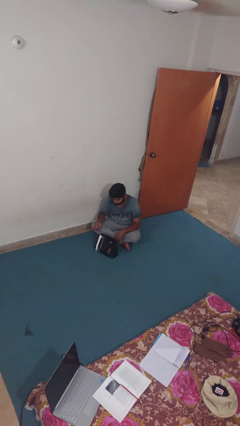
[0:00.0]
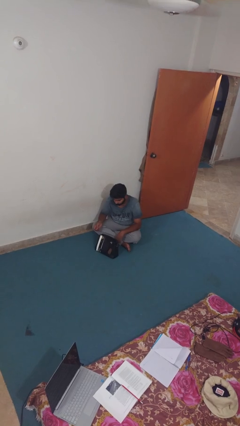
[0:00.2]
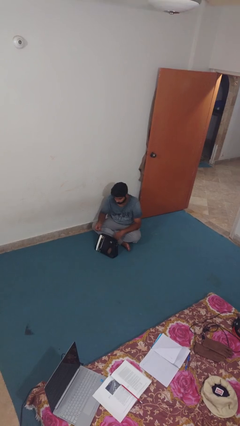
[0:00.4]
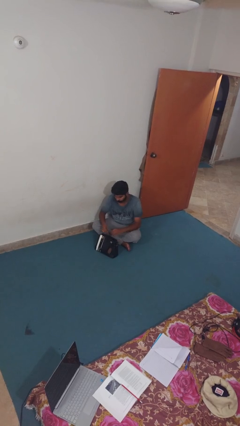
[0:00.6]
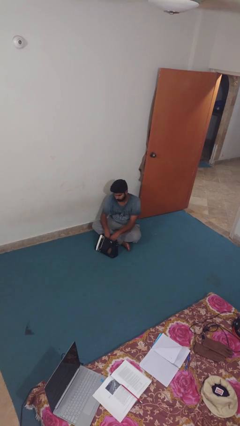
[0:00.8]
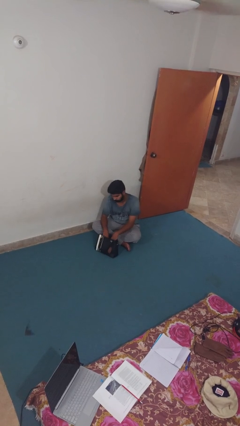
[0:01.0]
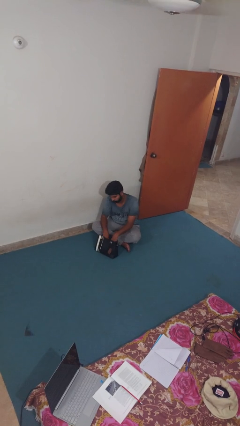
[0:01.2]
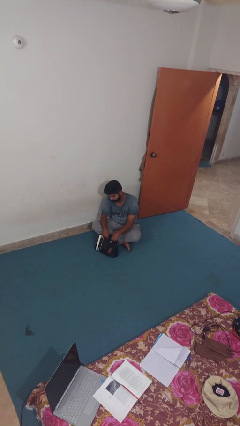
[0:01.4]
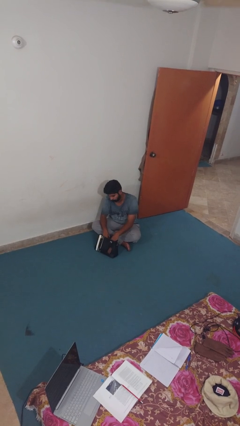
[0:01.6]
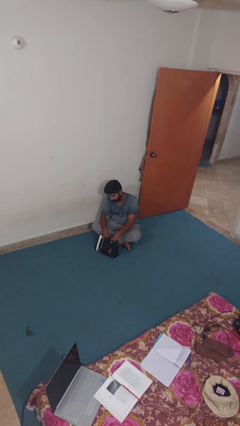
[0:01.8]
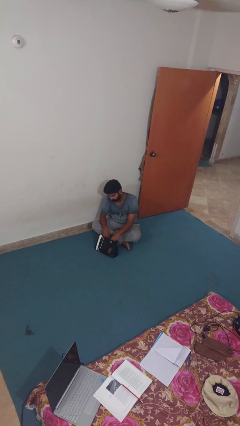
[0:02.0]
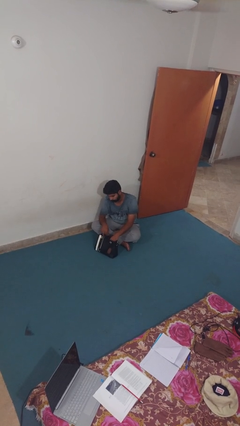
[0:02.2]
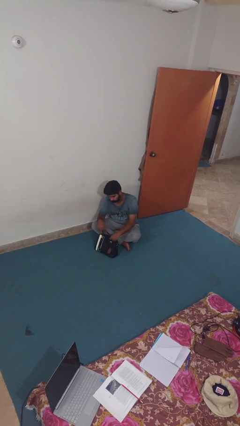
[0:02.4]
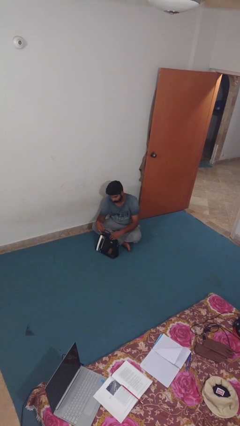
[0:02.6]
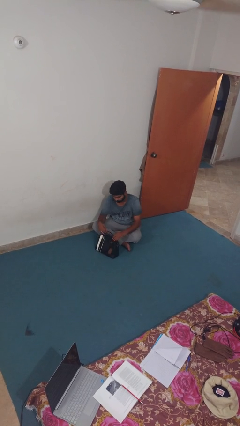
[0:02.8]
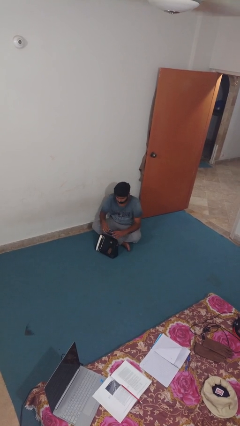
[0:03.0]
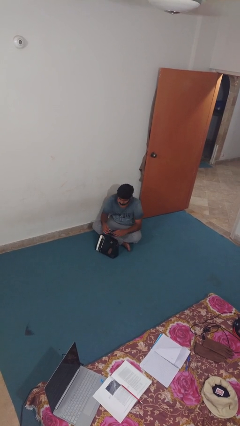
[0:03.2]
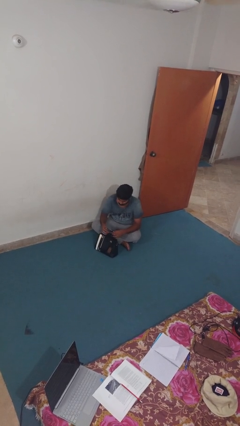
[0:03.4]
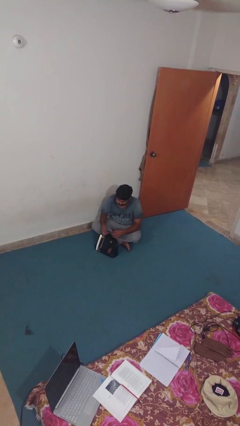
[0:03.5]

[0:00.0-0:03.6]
person searches in purse

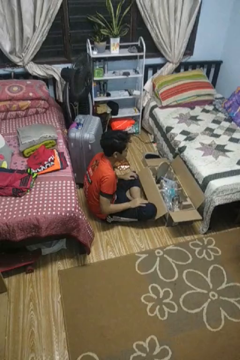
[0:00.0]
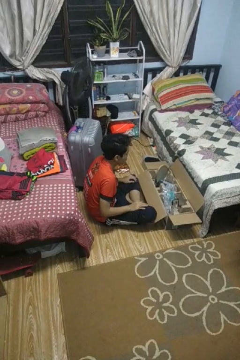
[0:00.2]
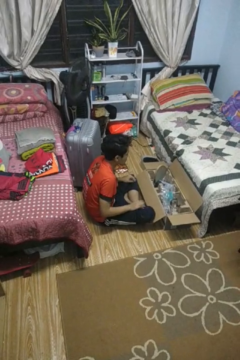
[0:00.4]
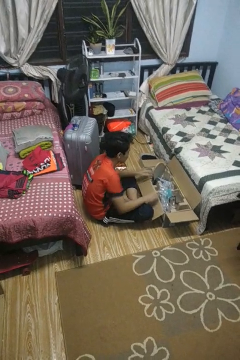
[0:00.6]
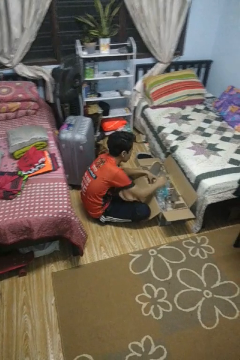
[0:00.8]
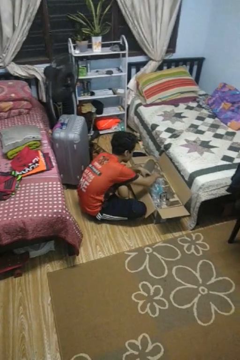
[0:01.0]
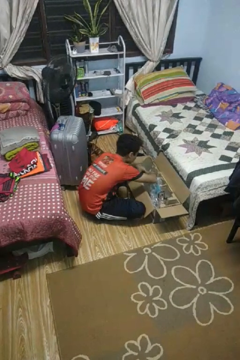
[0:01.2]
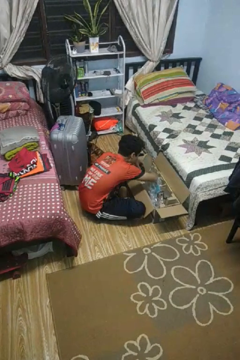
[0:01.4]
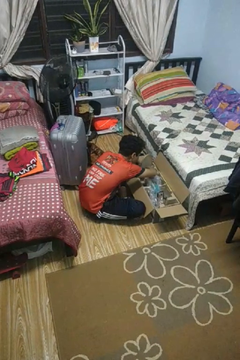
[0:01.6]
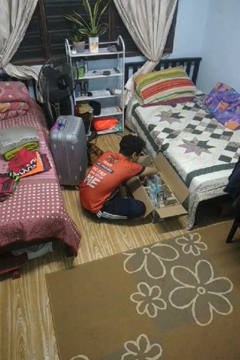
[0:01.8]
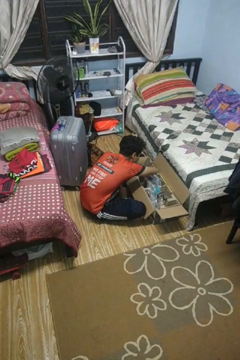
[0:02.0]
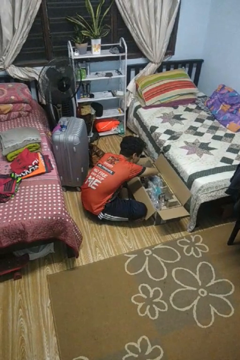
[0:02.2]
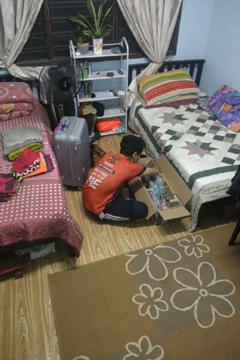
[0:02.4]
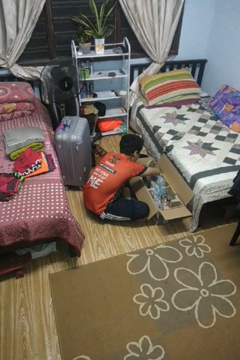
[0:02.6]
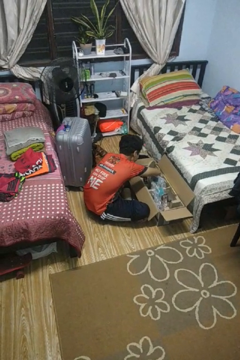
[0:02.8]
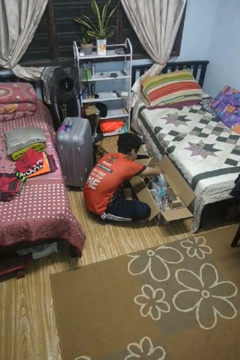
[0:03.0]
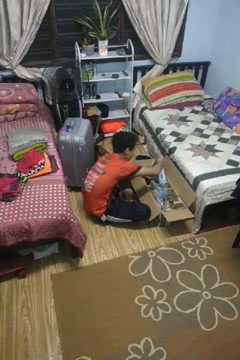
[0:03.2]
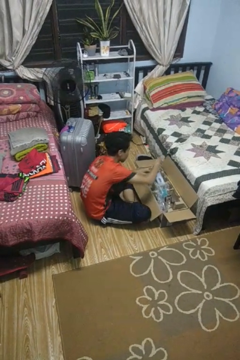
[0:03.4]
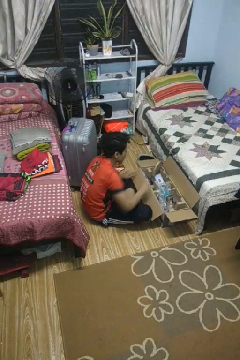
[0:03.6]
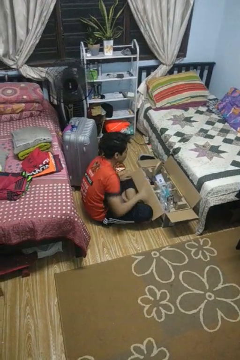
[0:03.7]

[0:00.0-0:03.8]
person searches in box

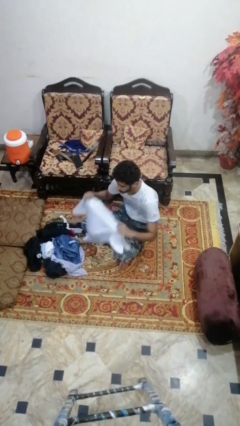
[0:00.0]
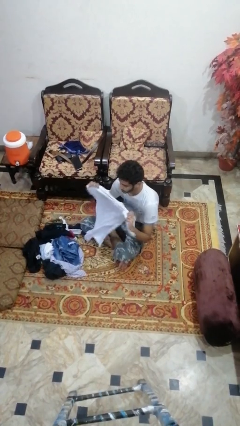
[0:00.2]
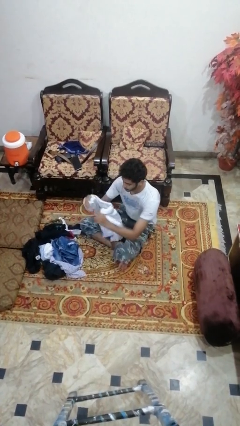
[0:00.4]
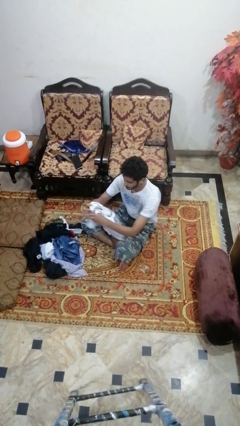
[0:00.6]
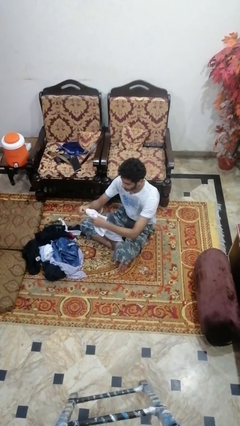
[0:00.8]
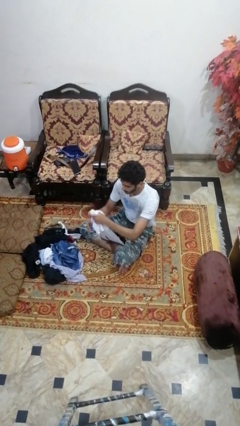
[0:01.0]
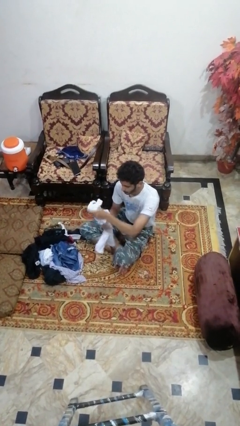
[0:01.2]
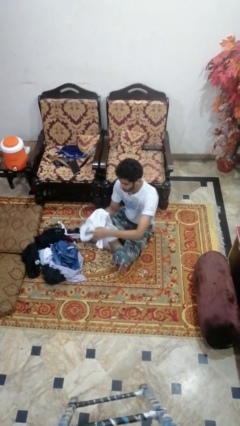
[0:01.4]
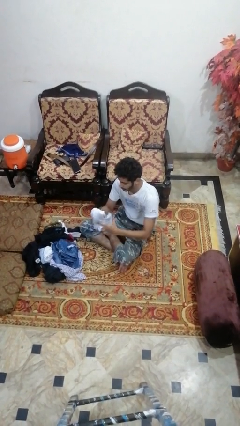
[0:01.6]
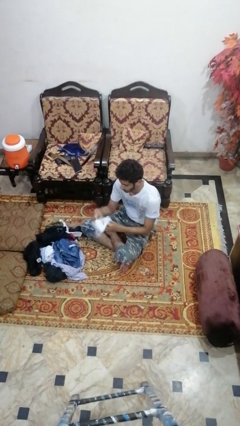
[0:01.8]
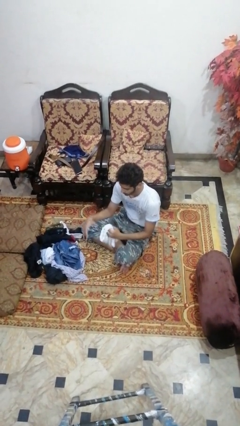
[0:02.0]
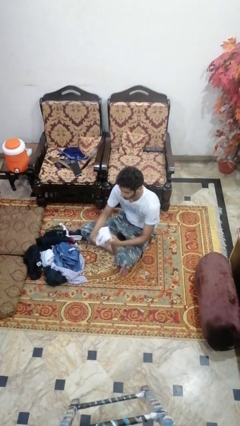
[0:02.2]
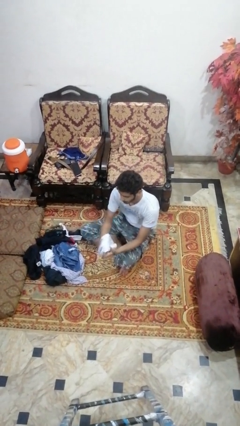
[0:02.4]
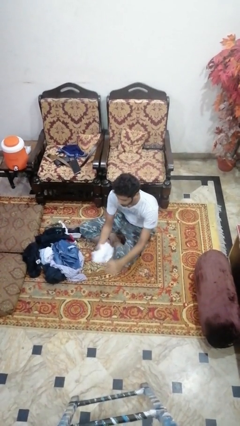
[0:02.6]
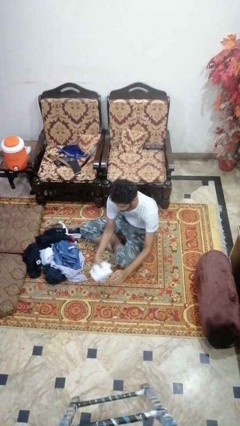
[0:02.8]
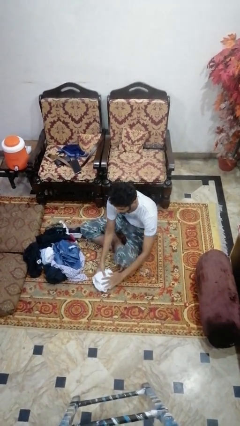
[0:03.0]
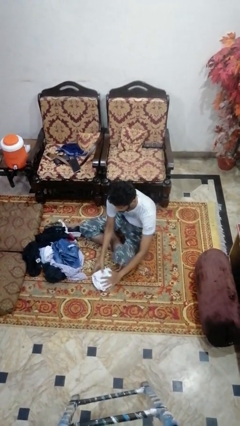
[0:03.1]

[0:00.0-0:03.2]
person folds shirt

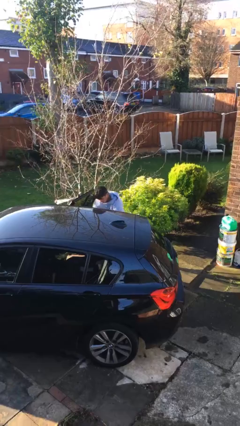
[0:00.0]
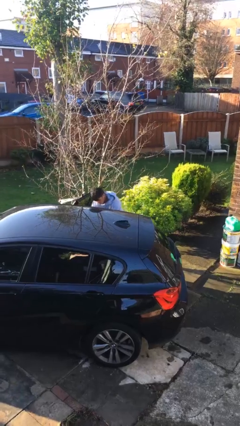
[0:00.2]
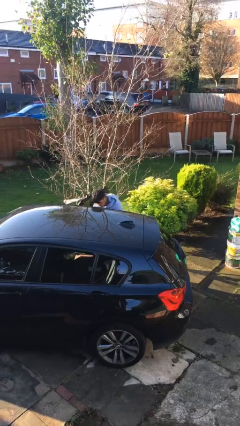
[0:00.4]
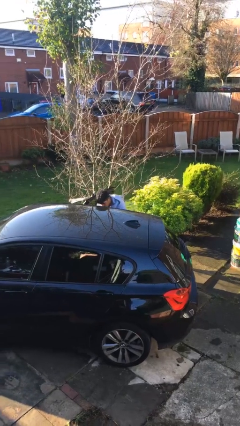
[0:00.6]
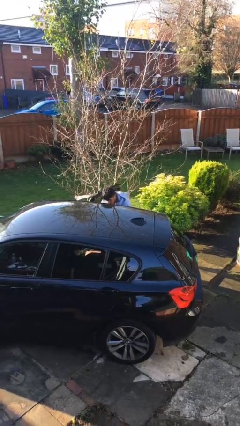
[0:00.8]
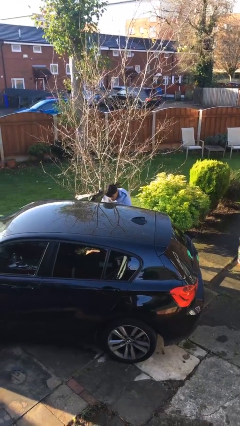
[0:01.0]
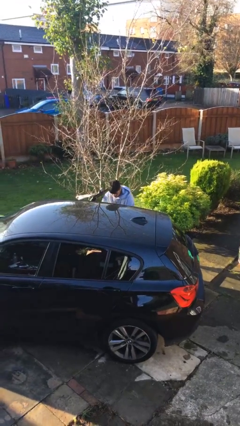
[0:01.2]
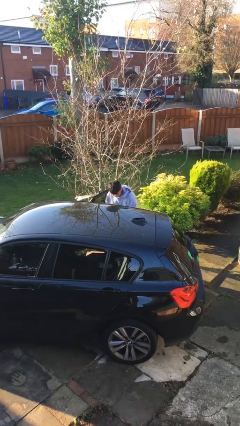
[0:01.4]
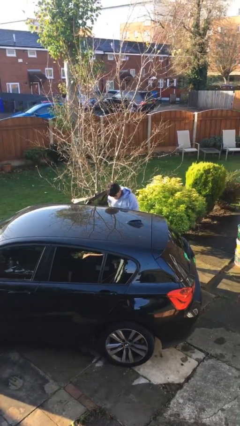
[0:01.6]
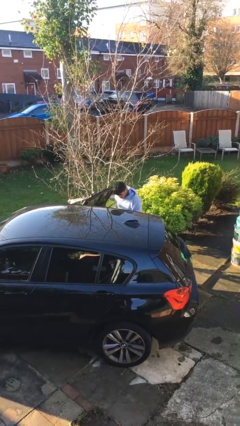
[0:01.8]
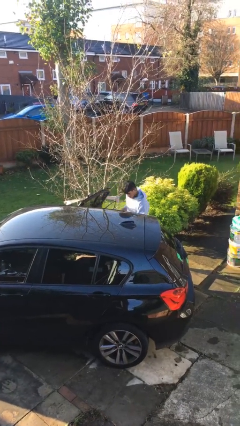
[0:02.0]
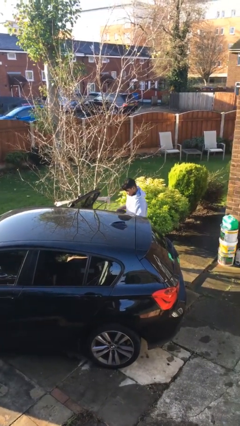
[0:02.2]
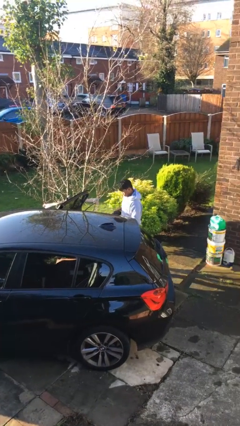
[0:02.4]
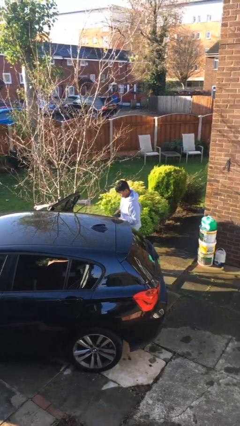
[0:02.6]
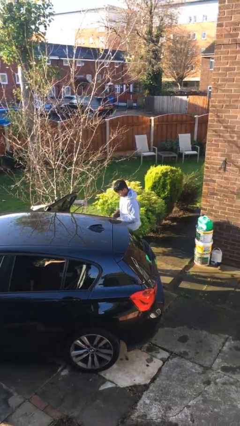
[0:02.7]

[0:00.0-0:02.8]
person unloads car

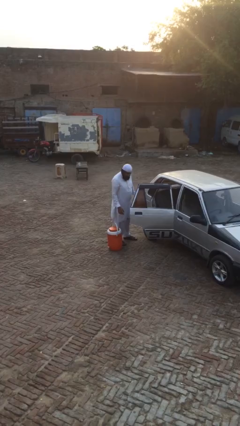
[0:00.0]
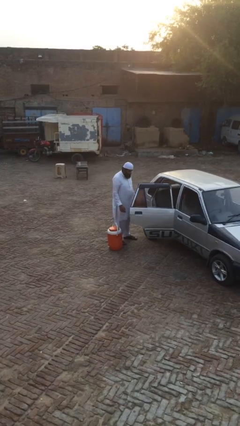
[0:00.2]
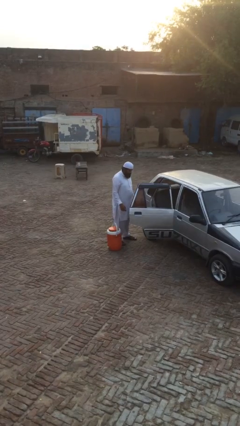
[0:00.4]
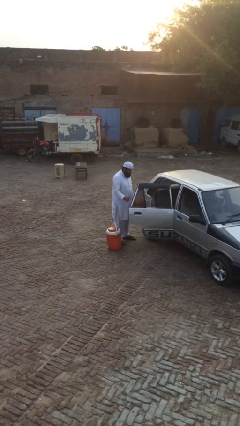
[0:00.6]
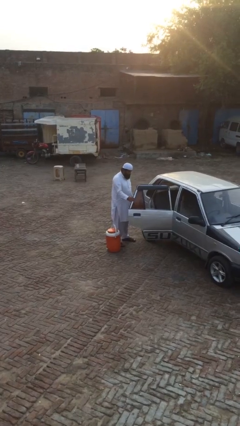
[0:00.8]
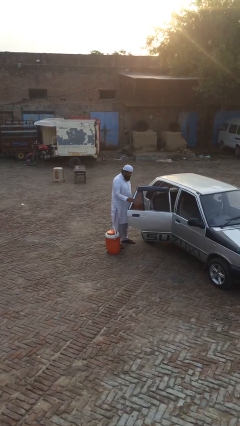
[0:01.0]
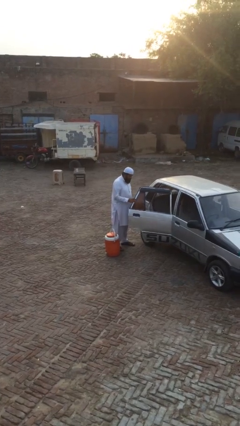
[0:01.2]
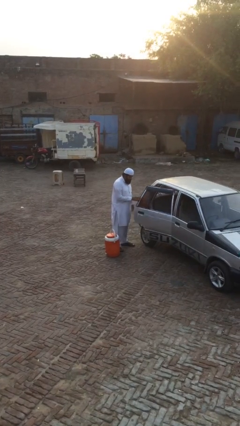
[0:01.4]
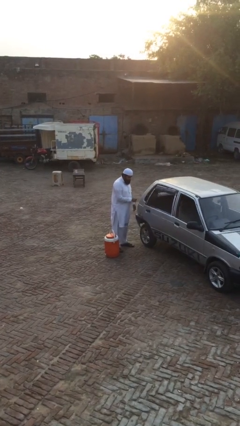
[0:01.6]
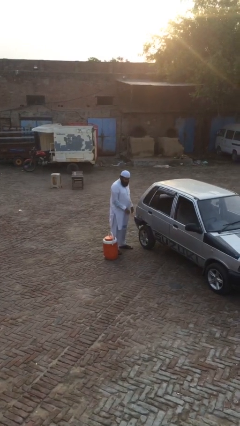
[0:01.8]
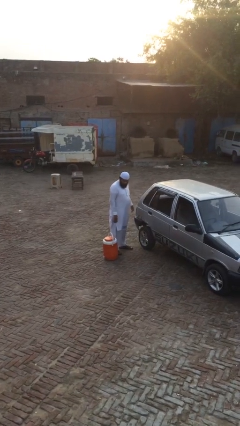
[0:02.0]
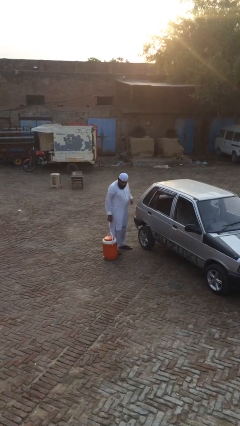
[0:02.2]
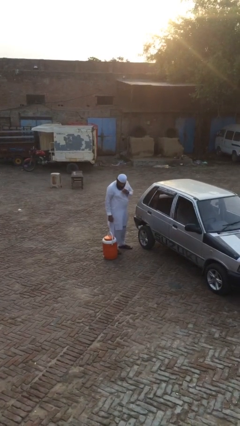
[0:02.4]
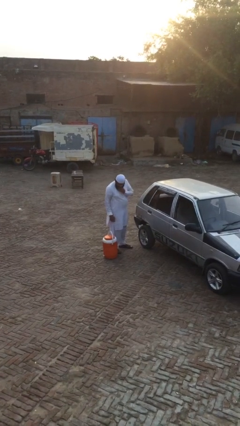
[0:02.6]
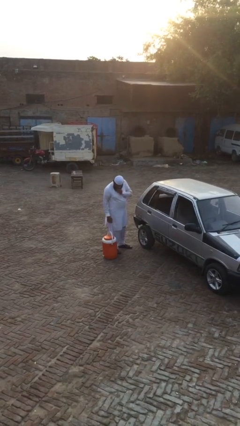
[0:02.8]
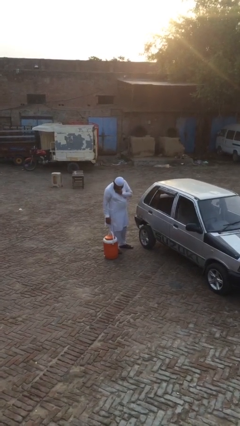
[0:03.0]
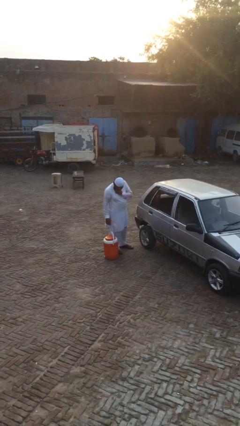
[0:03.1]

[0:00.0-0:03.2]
person closes car door

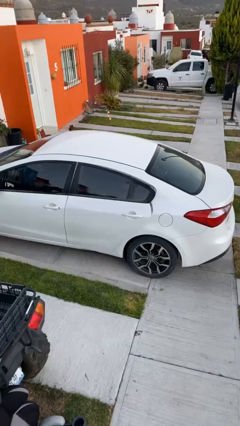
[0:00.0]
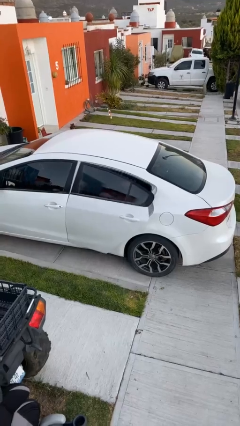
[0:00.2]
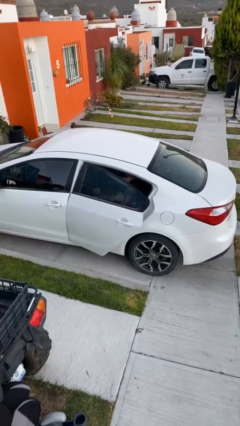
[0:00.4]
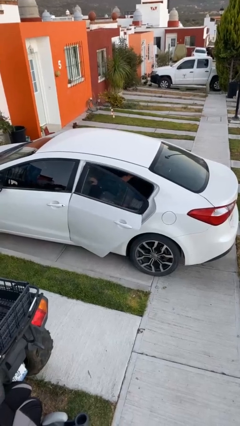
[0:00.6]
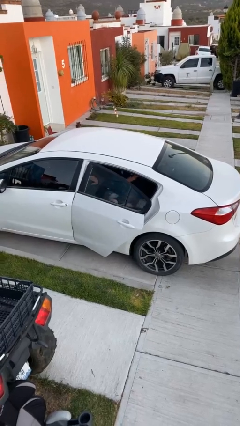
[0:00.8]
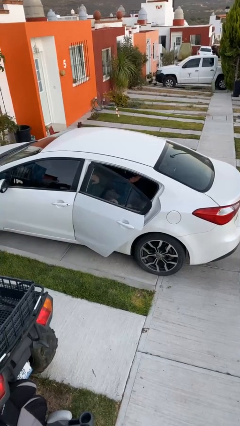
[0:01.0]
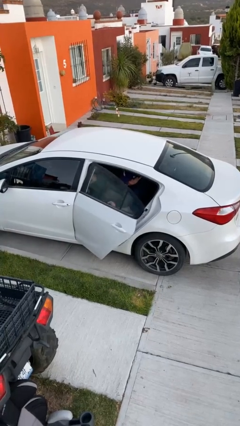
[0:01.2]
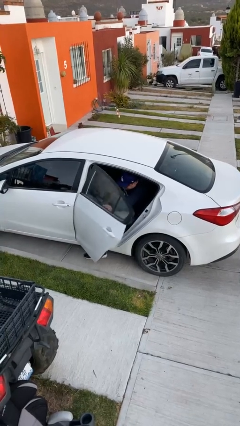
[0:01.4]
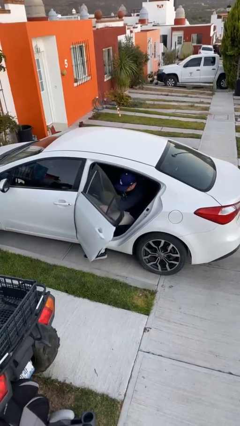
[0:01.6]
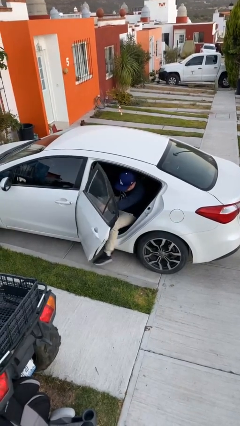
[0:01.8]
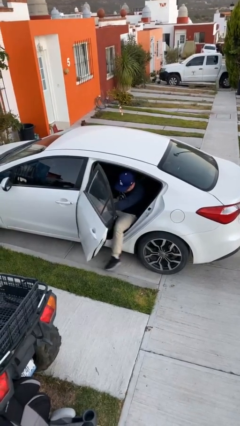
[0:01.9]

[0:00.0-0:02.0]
person opens car door
